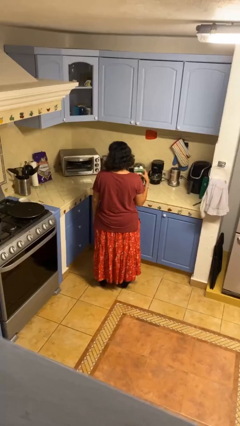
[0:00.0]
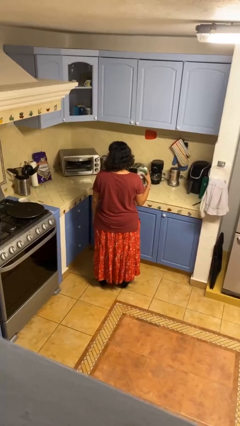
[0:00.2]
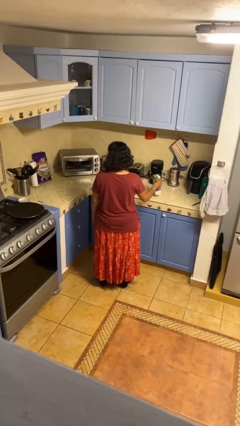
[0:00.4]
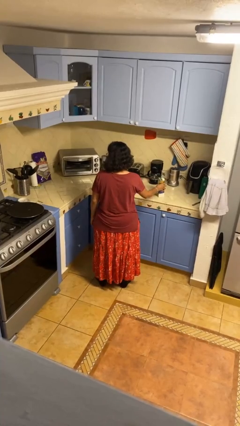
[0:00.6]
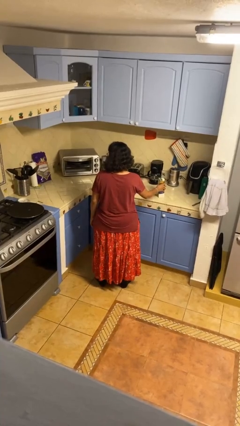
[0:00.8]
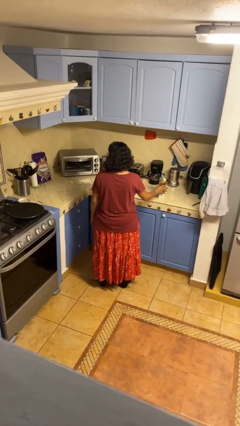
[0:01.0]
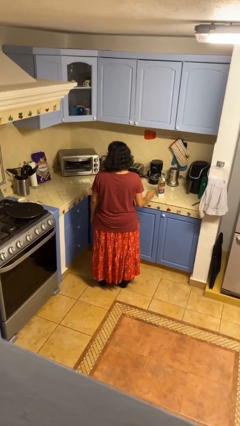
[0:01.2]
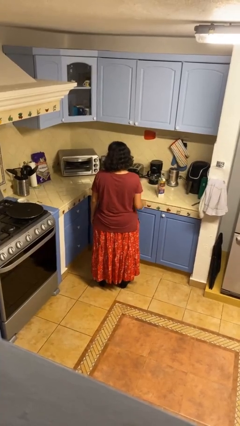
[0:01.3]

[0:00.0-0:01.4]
person puts down object on countertop

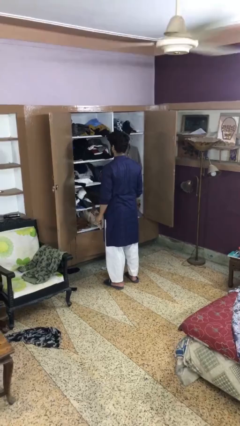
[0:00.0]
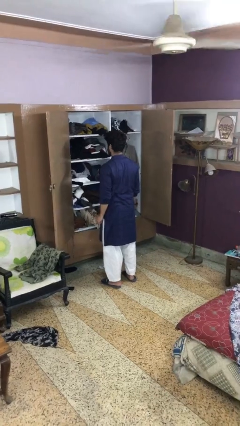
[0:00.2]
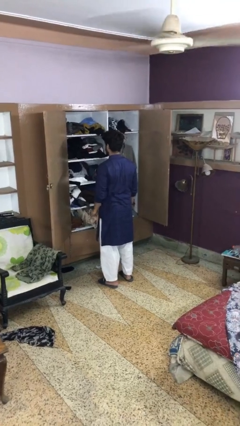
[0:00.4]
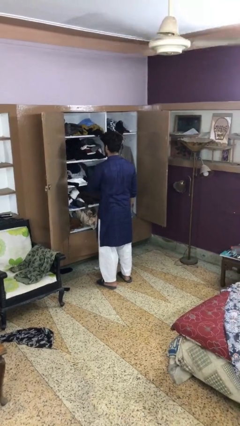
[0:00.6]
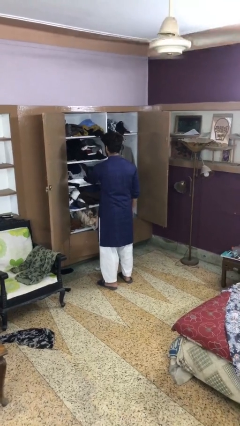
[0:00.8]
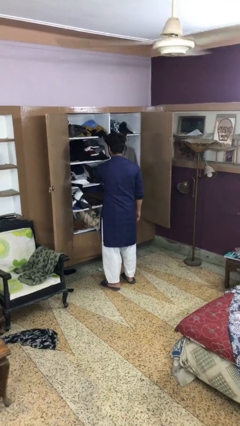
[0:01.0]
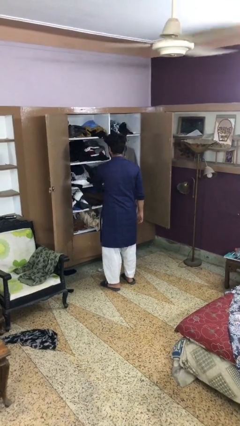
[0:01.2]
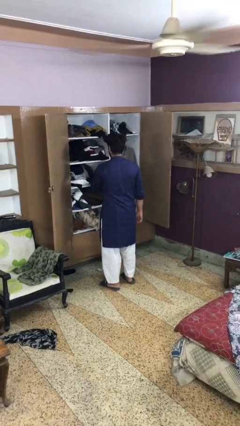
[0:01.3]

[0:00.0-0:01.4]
person takes clothes from dresser

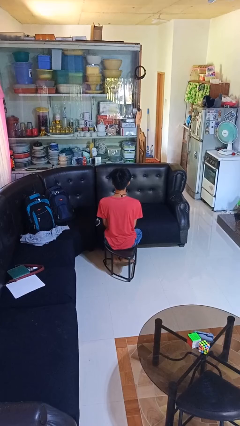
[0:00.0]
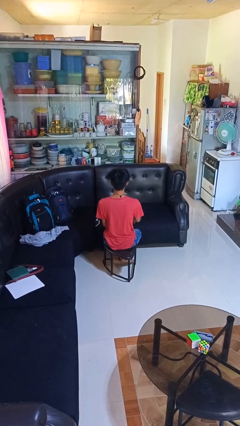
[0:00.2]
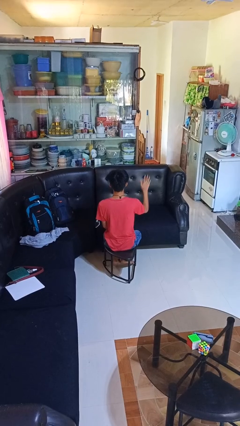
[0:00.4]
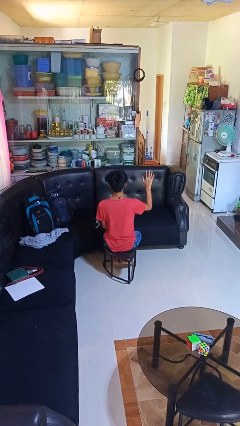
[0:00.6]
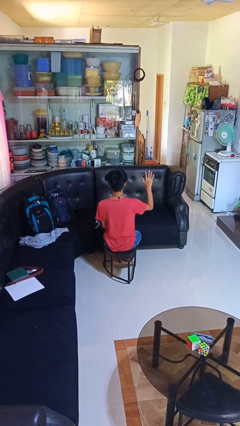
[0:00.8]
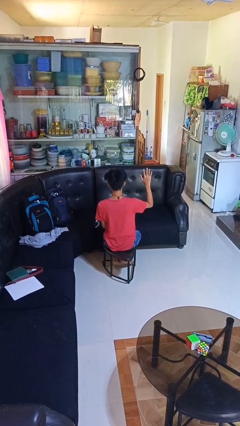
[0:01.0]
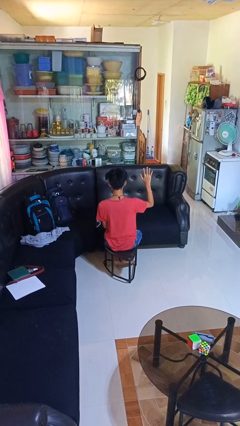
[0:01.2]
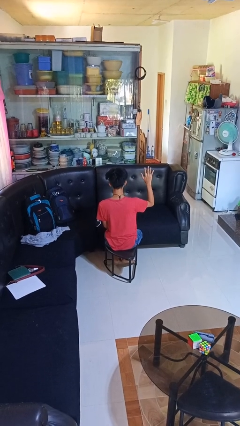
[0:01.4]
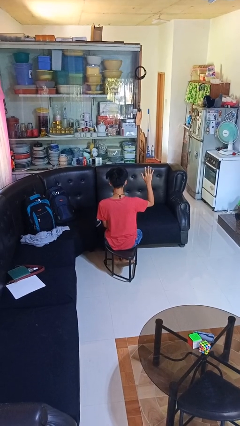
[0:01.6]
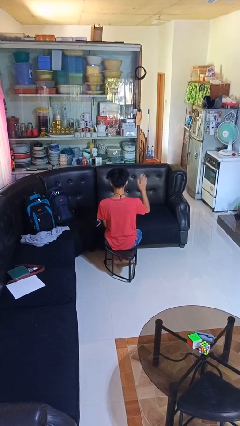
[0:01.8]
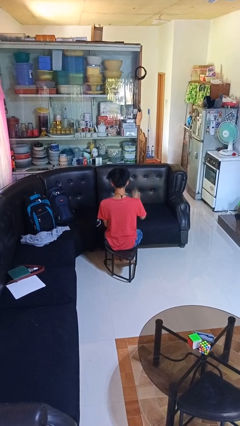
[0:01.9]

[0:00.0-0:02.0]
person gestures number five

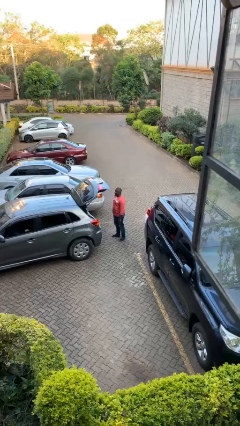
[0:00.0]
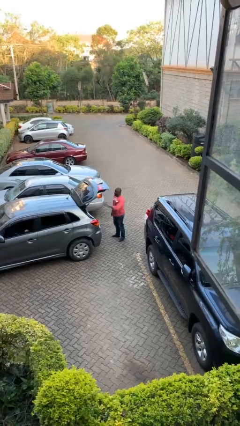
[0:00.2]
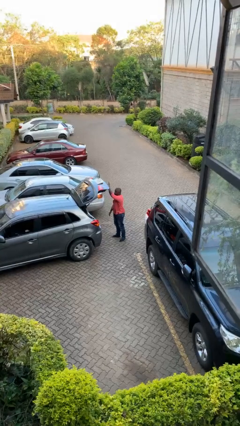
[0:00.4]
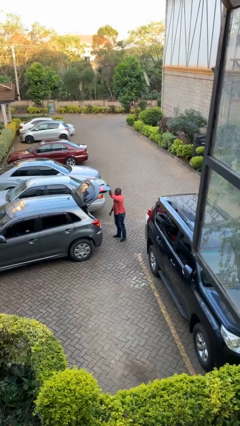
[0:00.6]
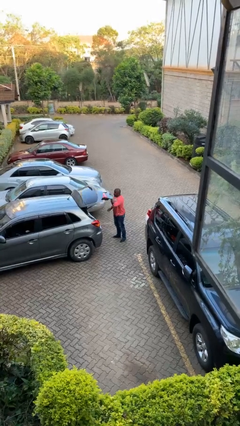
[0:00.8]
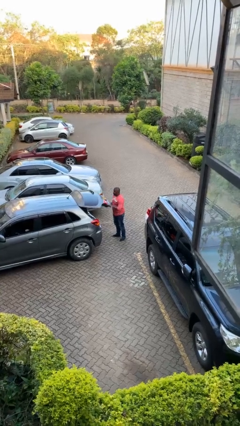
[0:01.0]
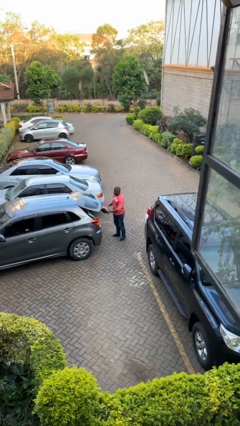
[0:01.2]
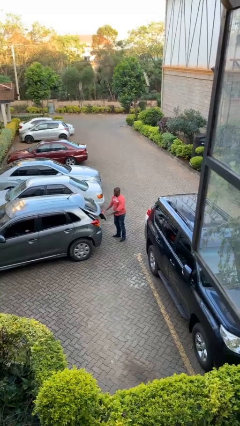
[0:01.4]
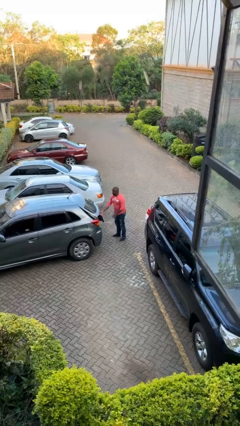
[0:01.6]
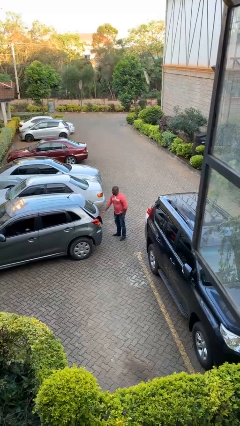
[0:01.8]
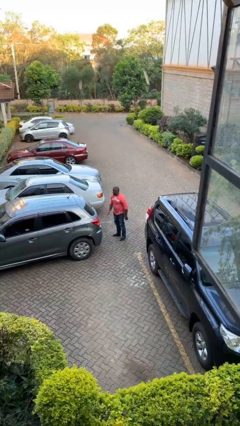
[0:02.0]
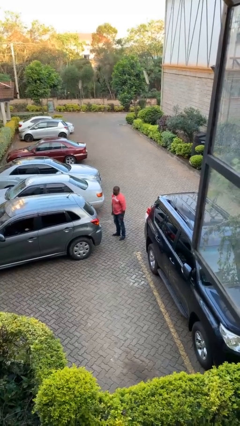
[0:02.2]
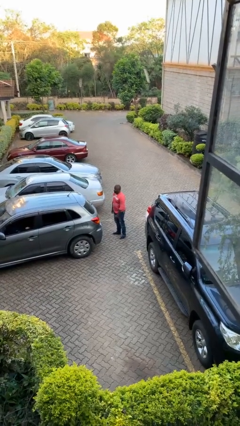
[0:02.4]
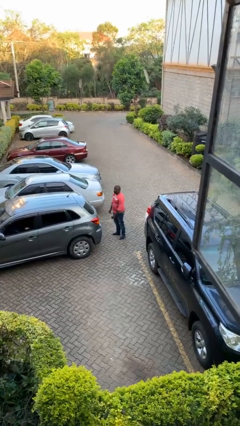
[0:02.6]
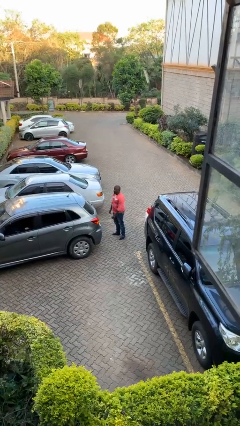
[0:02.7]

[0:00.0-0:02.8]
person closes car trunk

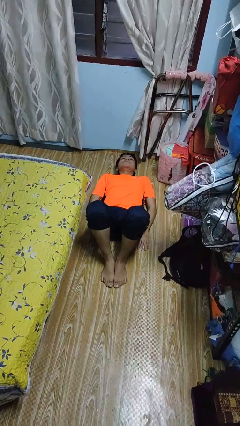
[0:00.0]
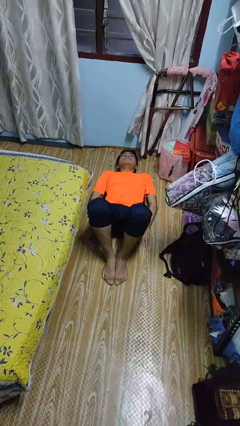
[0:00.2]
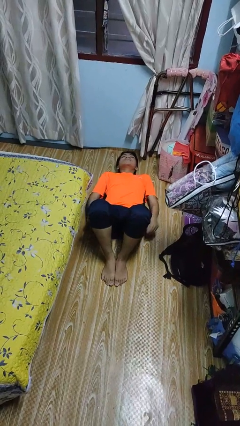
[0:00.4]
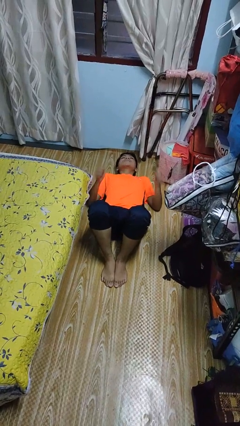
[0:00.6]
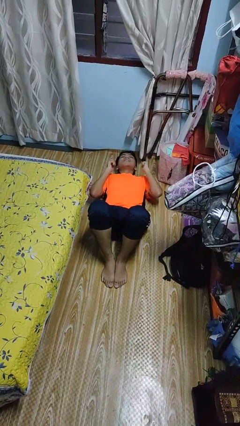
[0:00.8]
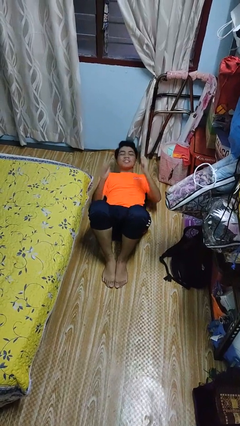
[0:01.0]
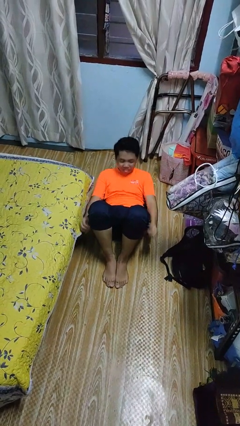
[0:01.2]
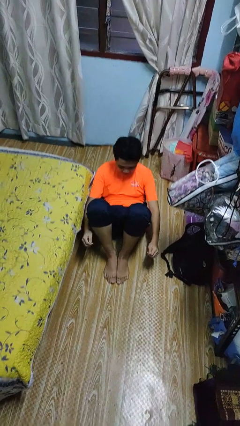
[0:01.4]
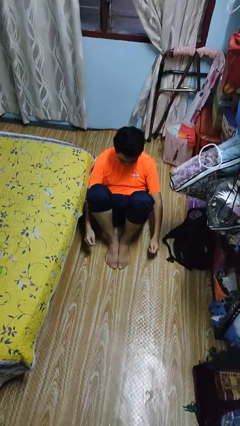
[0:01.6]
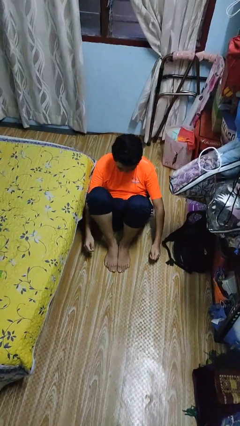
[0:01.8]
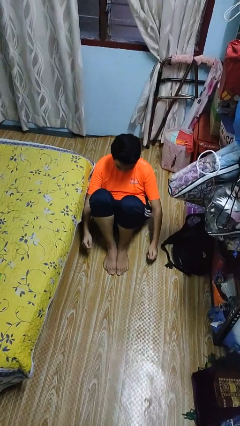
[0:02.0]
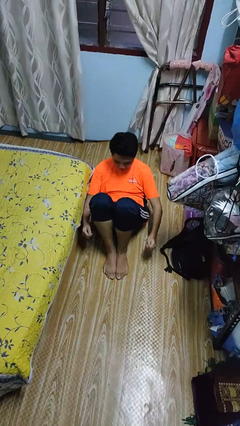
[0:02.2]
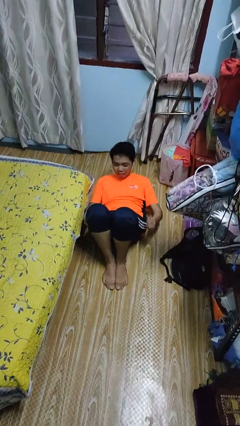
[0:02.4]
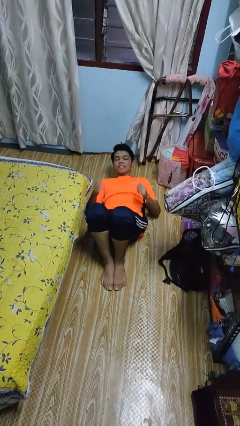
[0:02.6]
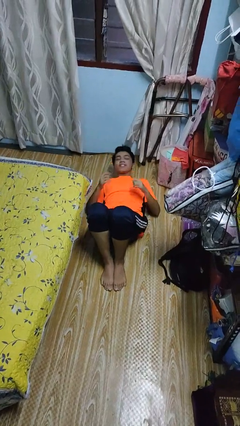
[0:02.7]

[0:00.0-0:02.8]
person exercises with situp

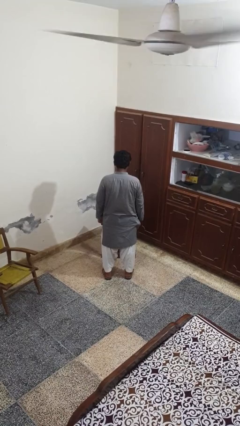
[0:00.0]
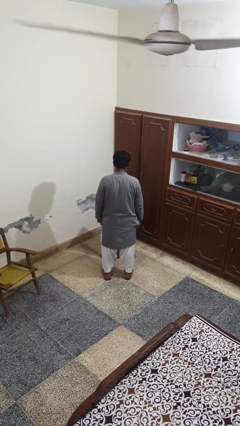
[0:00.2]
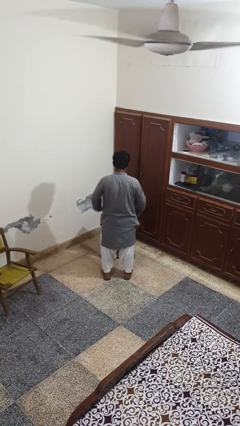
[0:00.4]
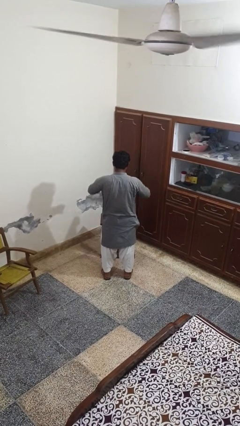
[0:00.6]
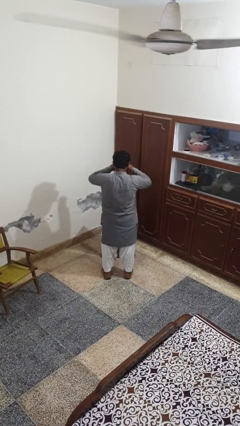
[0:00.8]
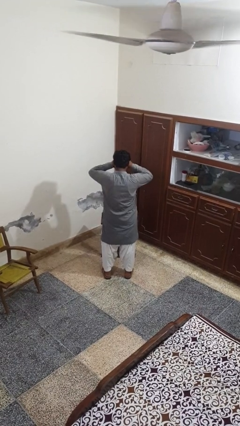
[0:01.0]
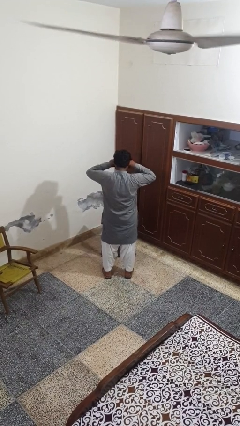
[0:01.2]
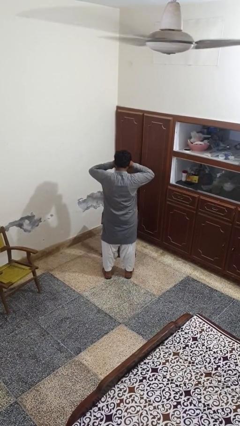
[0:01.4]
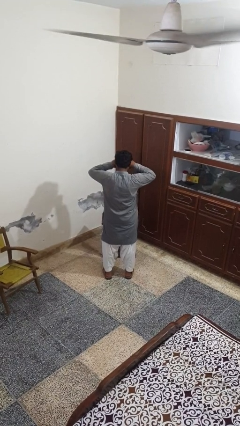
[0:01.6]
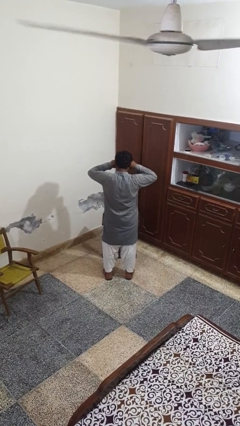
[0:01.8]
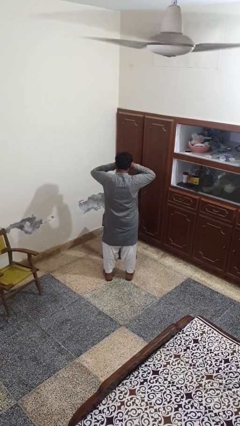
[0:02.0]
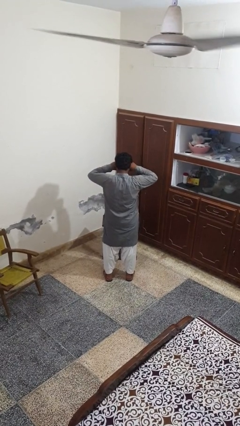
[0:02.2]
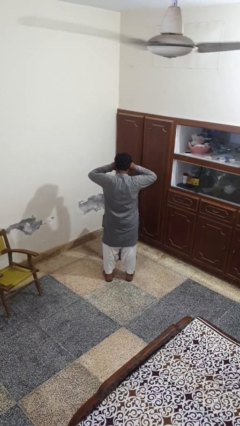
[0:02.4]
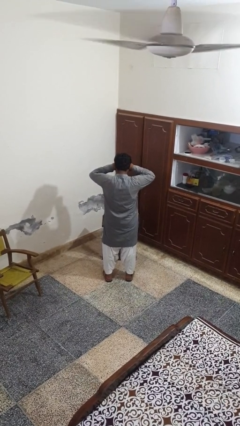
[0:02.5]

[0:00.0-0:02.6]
person rubs eyes

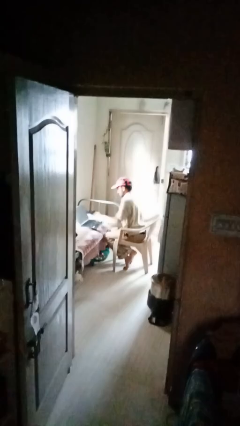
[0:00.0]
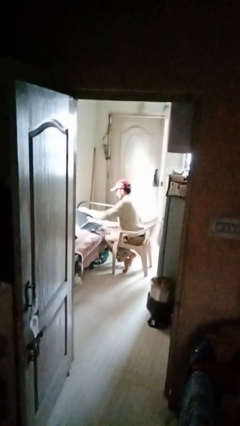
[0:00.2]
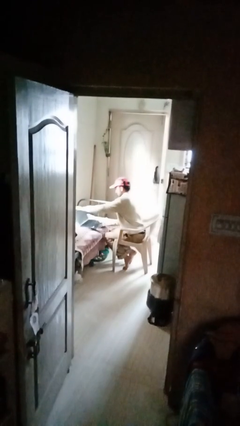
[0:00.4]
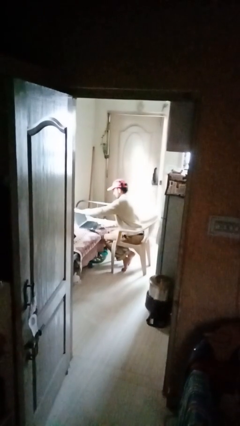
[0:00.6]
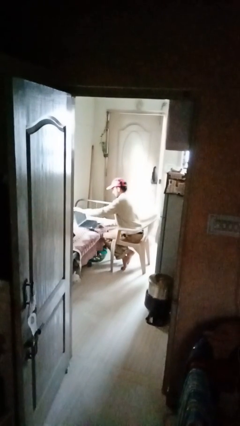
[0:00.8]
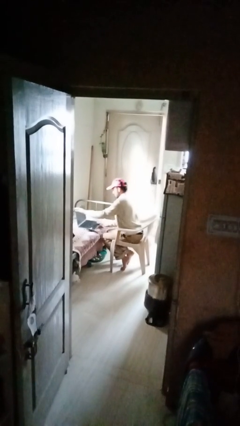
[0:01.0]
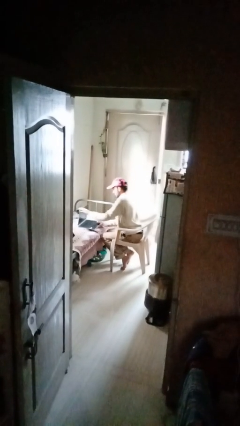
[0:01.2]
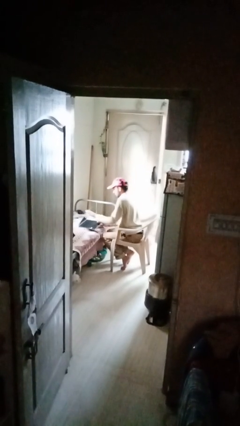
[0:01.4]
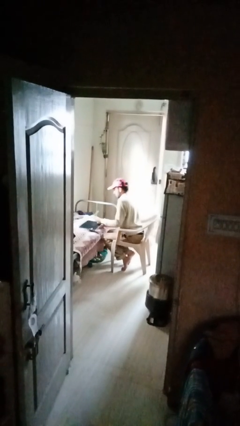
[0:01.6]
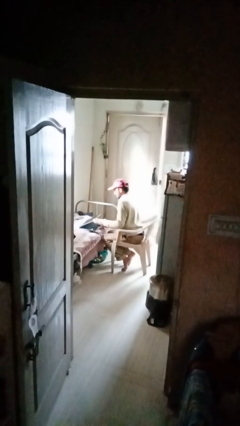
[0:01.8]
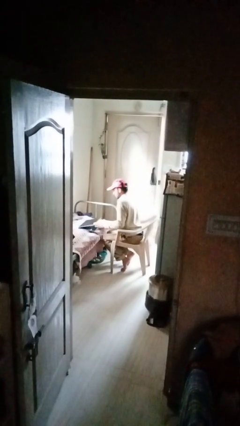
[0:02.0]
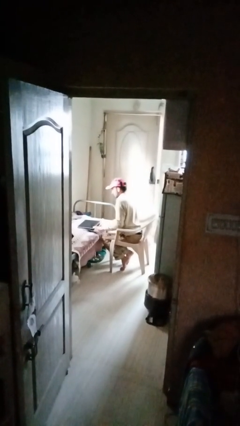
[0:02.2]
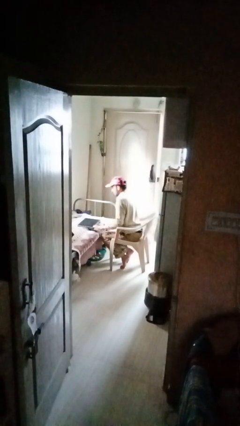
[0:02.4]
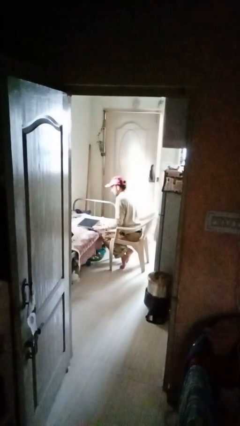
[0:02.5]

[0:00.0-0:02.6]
person closes laptop

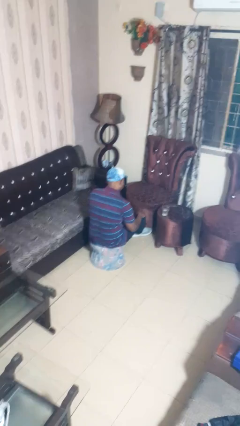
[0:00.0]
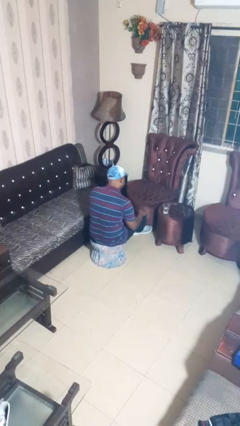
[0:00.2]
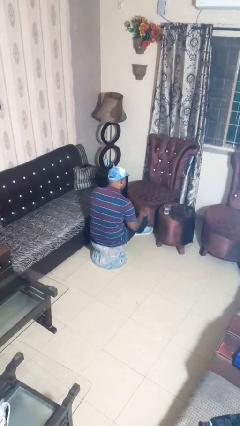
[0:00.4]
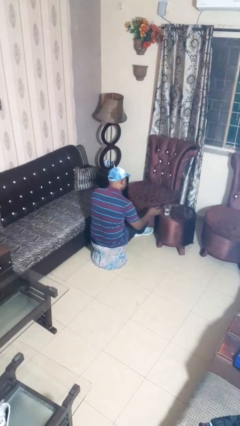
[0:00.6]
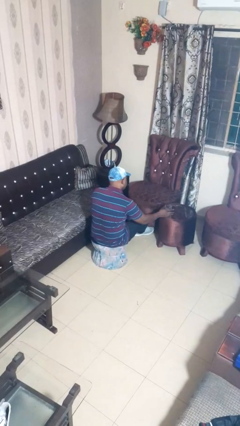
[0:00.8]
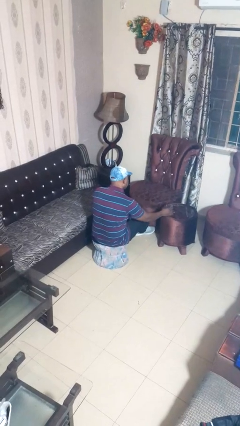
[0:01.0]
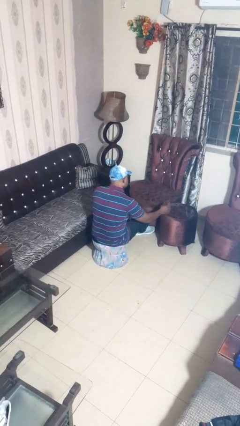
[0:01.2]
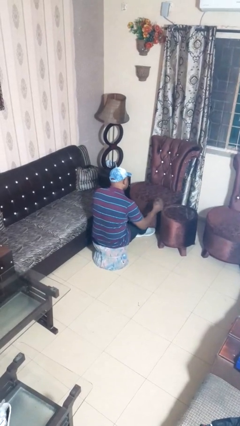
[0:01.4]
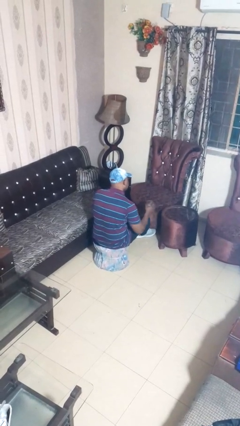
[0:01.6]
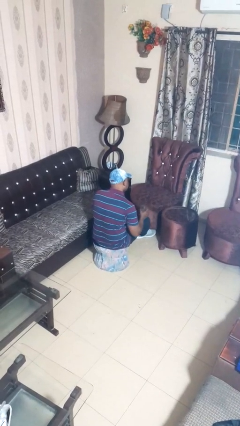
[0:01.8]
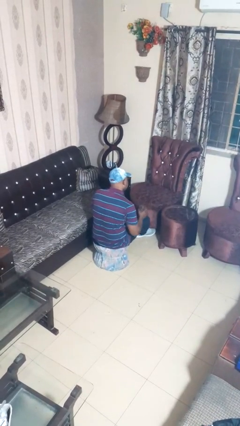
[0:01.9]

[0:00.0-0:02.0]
person picks up object from table
